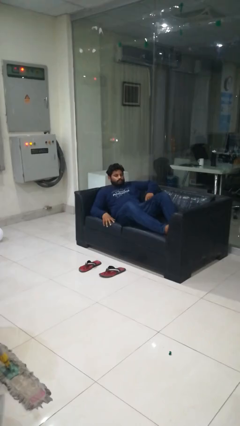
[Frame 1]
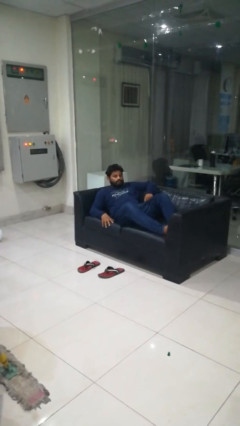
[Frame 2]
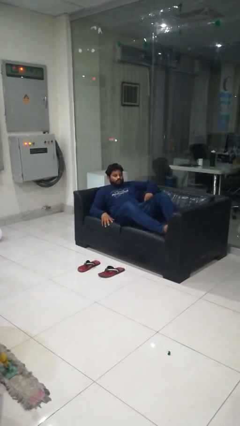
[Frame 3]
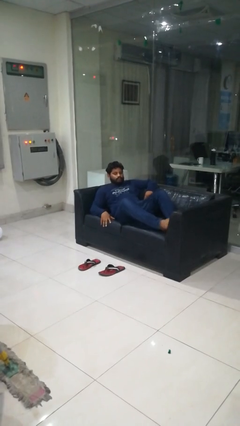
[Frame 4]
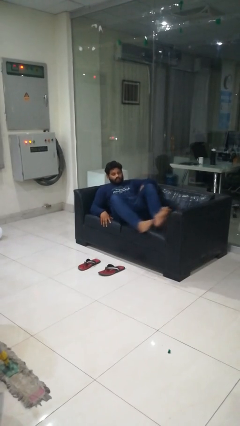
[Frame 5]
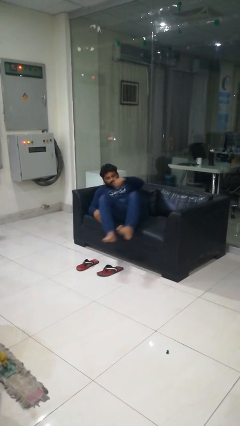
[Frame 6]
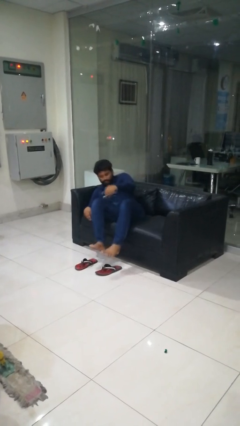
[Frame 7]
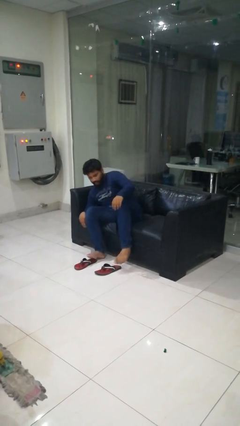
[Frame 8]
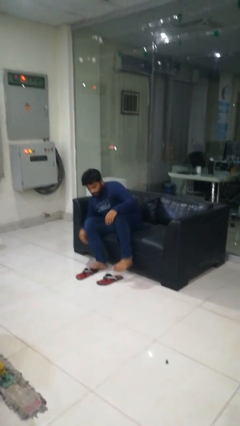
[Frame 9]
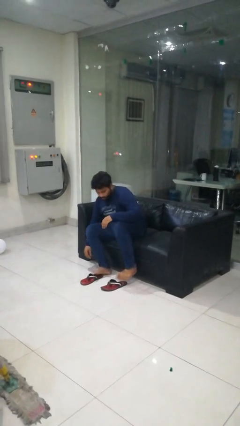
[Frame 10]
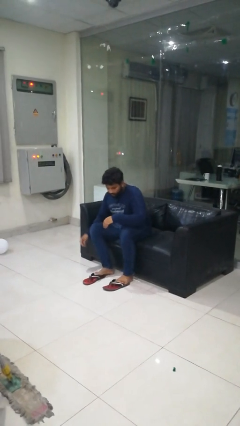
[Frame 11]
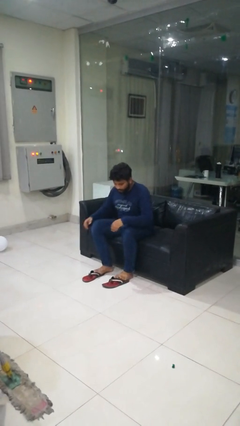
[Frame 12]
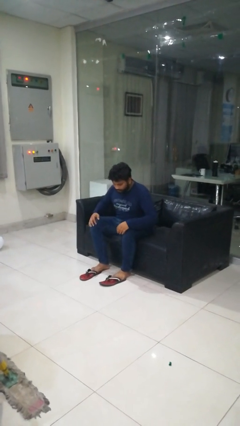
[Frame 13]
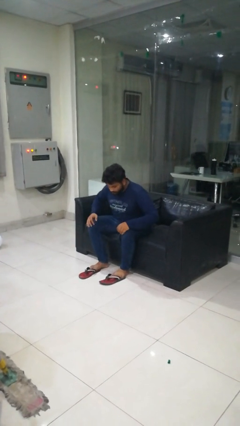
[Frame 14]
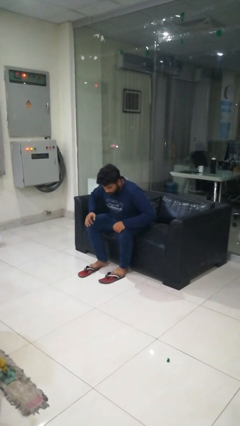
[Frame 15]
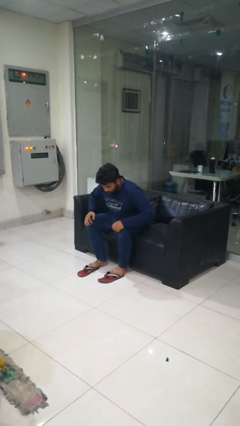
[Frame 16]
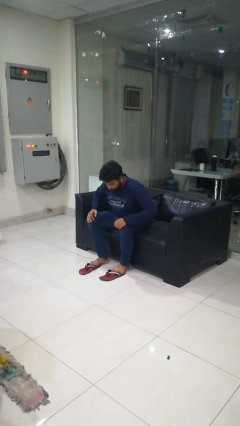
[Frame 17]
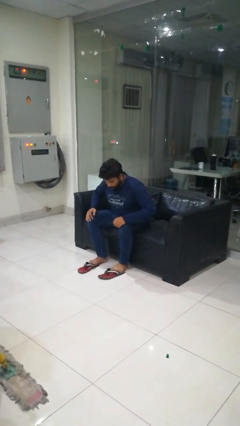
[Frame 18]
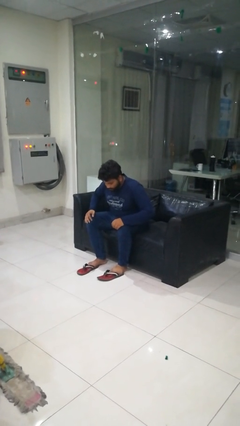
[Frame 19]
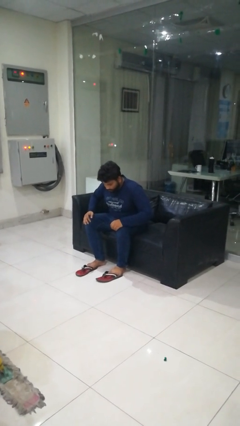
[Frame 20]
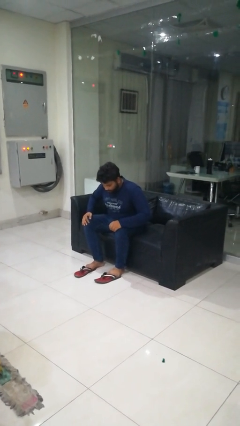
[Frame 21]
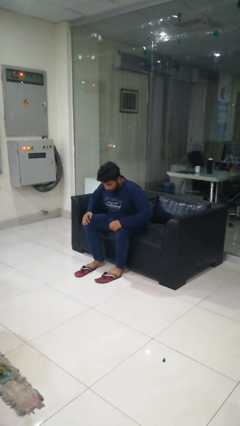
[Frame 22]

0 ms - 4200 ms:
person stands up

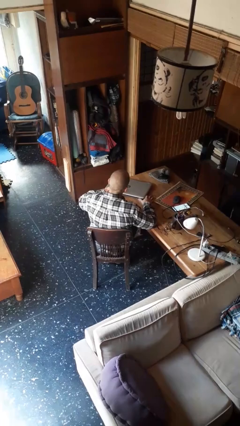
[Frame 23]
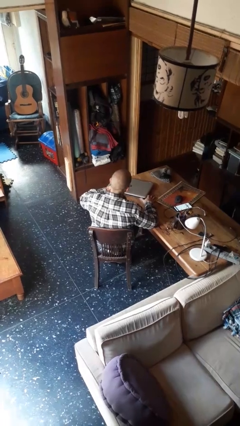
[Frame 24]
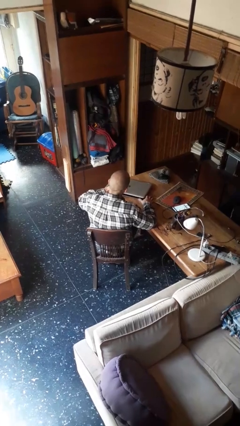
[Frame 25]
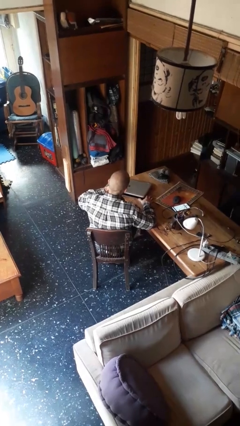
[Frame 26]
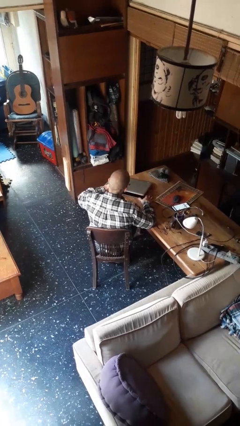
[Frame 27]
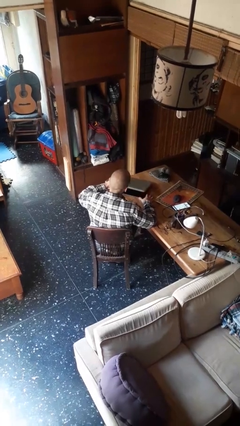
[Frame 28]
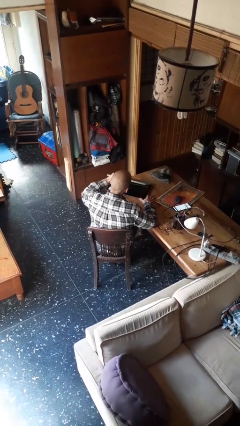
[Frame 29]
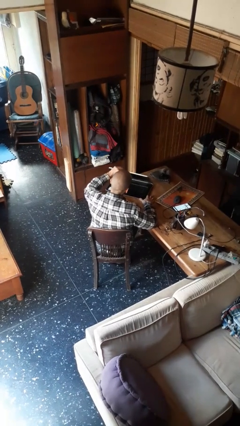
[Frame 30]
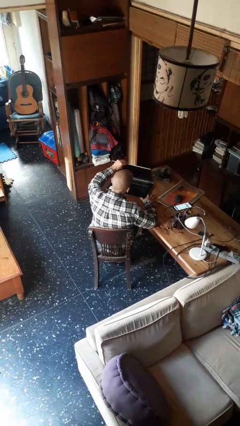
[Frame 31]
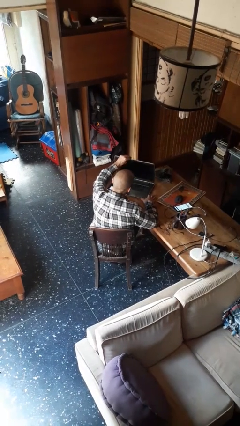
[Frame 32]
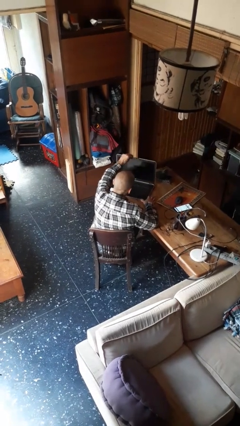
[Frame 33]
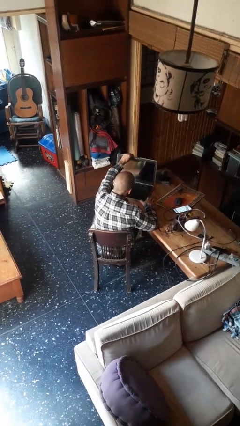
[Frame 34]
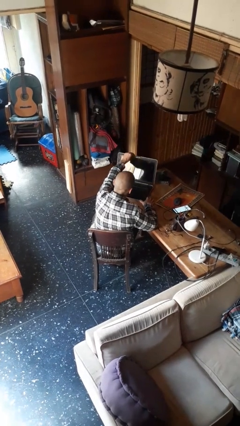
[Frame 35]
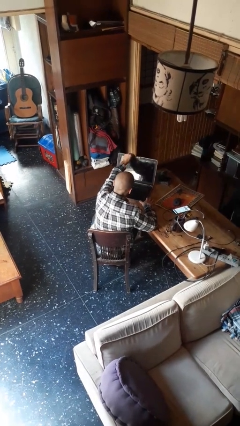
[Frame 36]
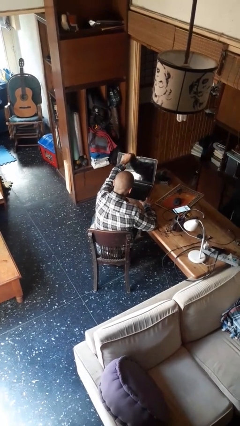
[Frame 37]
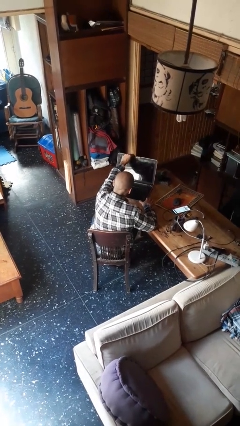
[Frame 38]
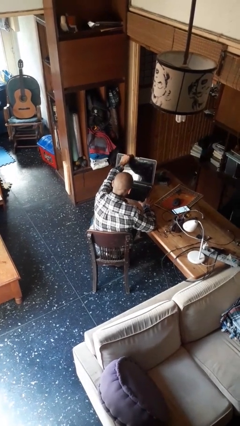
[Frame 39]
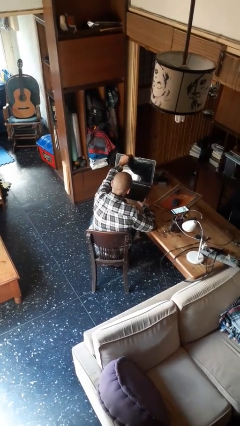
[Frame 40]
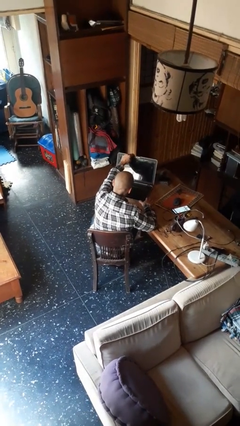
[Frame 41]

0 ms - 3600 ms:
person opens laptop

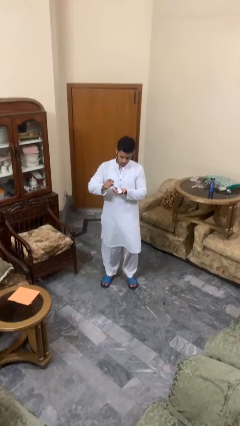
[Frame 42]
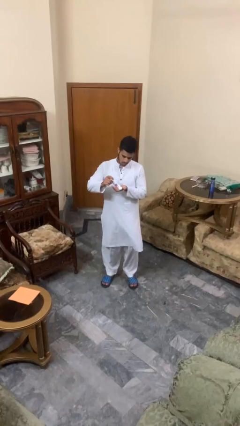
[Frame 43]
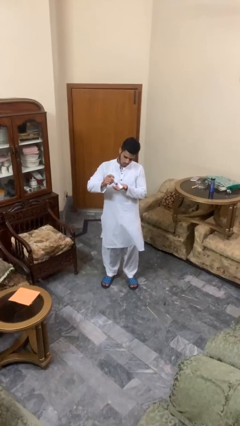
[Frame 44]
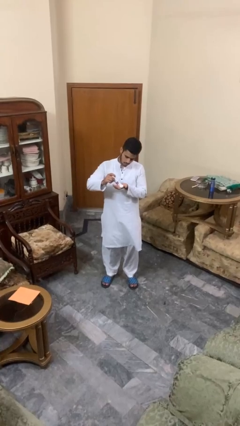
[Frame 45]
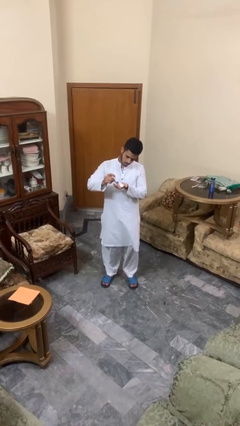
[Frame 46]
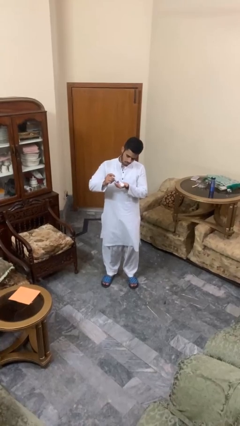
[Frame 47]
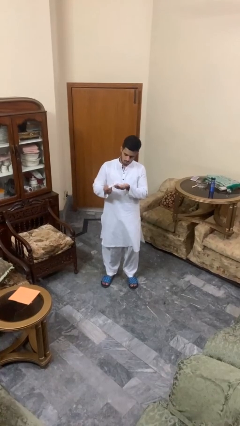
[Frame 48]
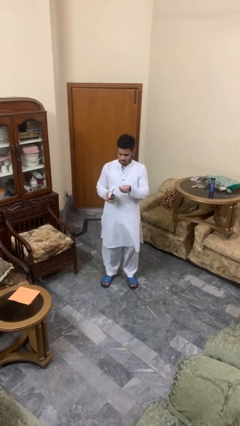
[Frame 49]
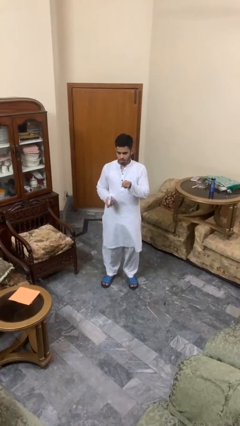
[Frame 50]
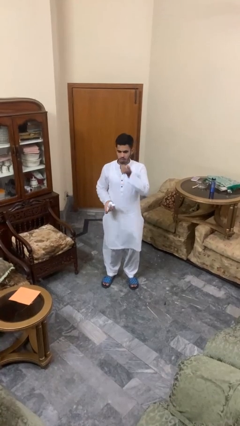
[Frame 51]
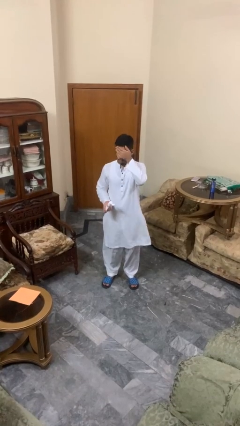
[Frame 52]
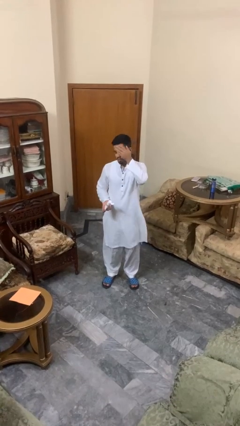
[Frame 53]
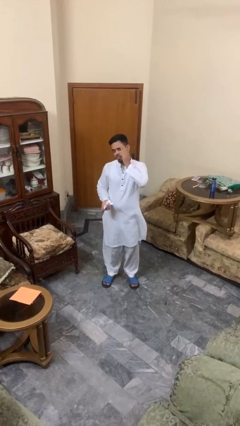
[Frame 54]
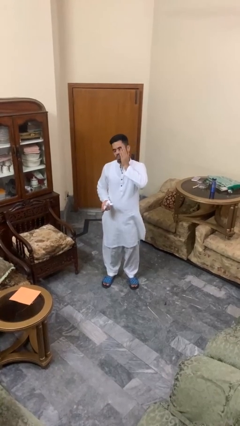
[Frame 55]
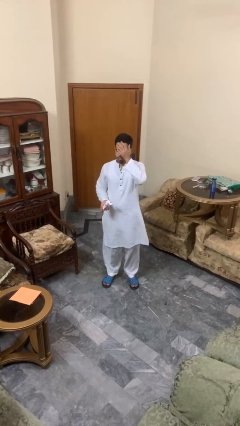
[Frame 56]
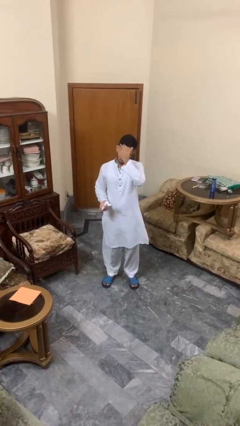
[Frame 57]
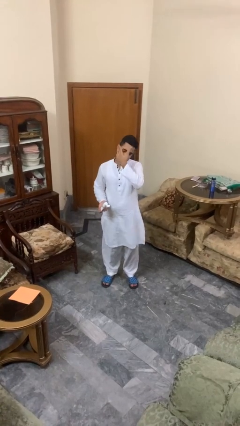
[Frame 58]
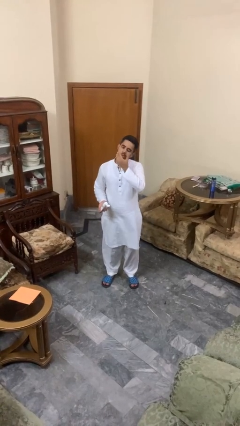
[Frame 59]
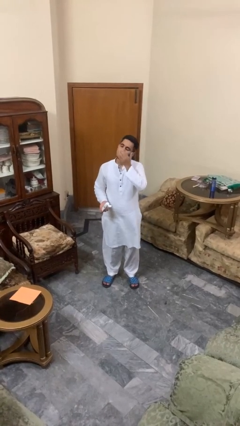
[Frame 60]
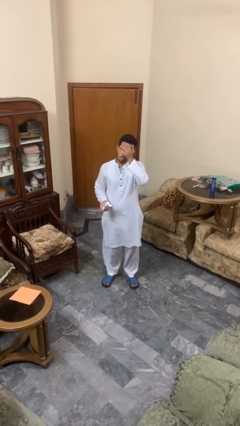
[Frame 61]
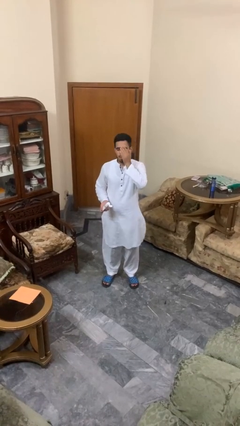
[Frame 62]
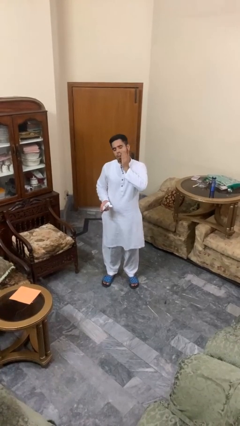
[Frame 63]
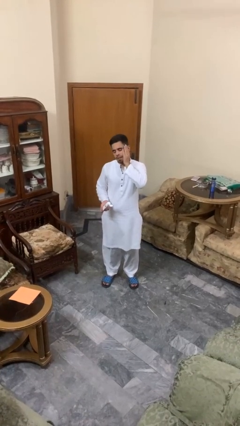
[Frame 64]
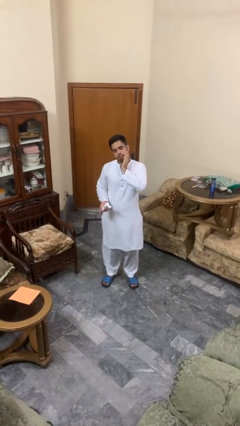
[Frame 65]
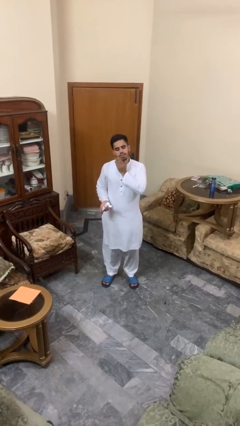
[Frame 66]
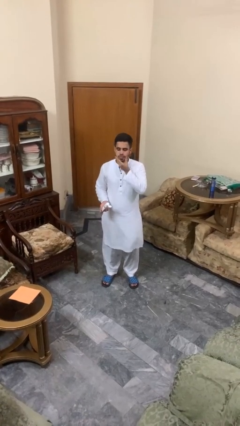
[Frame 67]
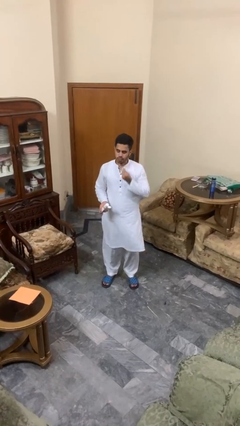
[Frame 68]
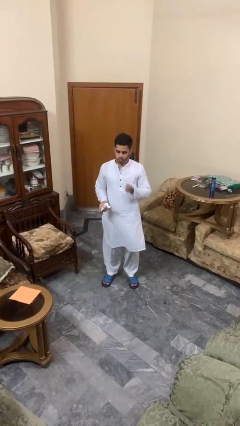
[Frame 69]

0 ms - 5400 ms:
person applies facial moisturizer

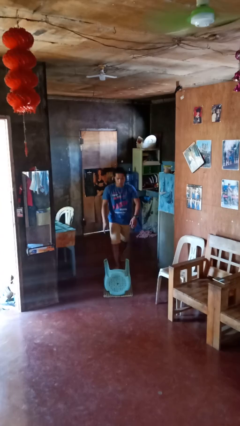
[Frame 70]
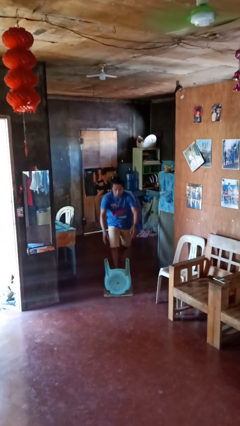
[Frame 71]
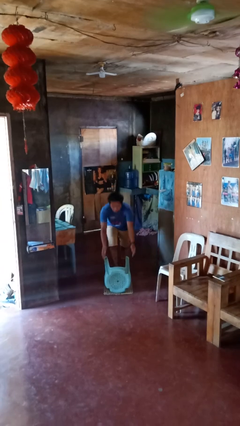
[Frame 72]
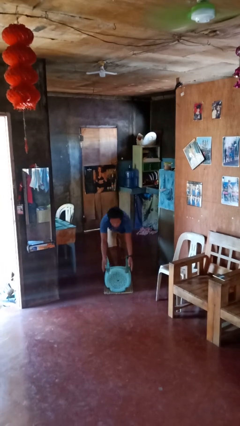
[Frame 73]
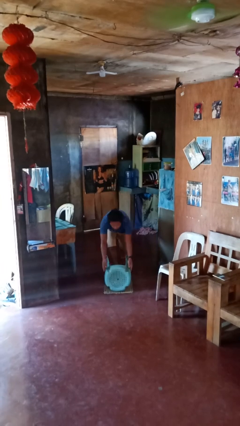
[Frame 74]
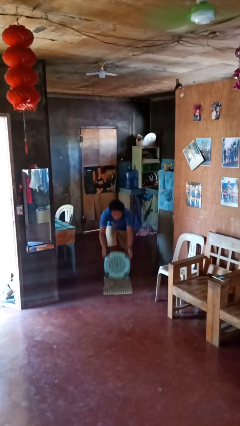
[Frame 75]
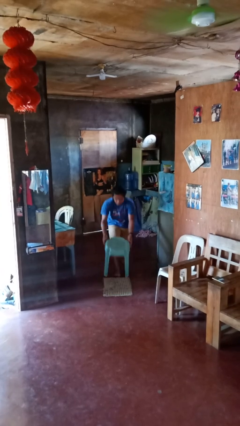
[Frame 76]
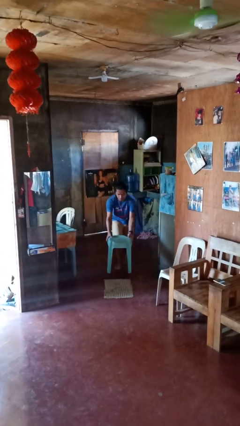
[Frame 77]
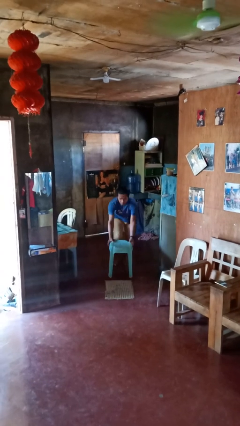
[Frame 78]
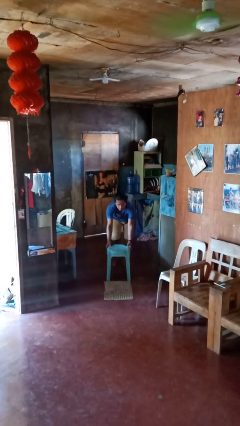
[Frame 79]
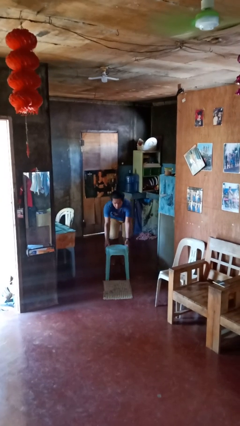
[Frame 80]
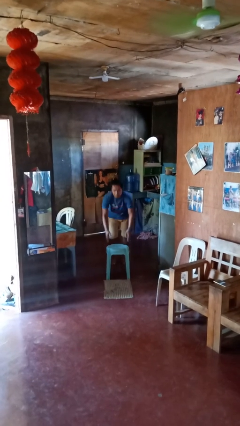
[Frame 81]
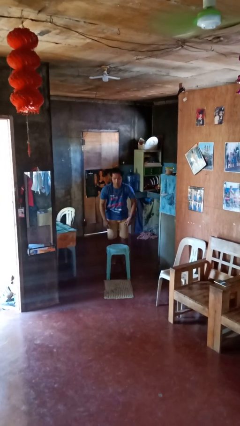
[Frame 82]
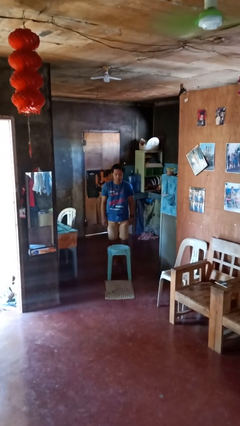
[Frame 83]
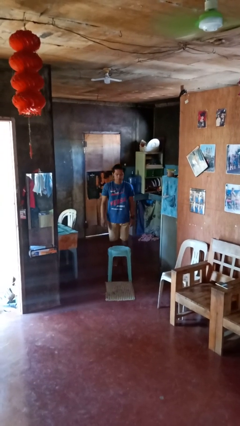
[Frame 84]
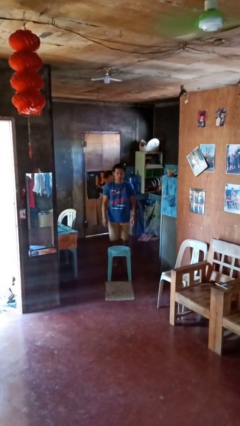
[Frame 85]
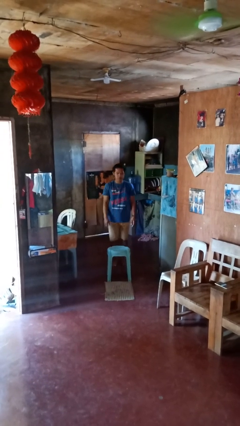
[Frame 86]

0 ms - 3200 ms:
person sets upright furniture

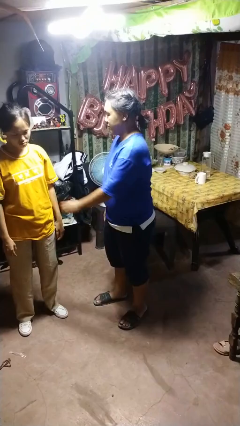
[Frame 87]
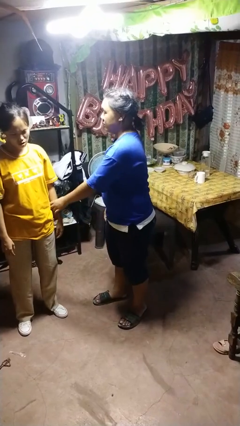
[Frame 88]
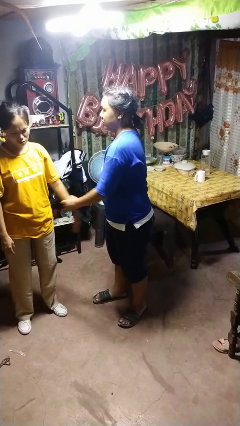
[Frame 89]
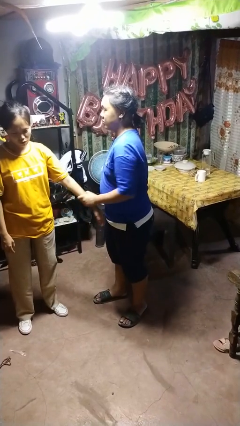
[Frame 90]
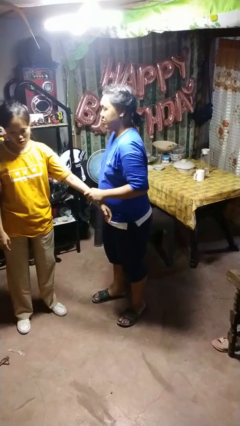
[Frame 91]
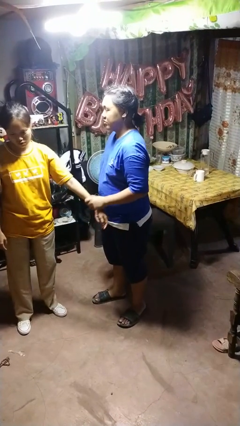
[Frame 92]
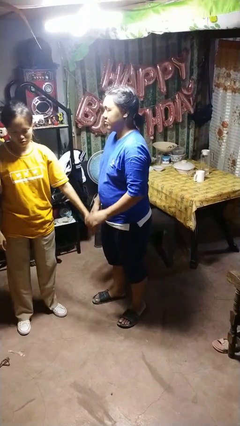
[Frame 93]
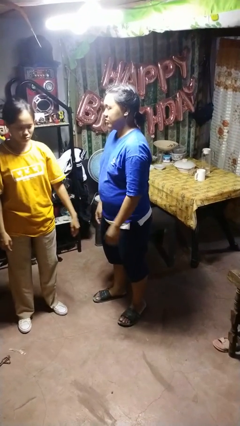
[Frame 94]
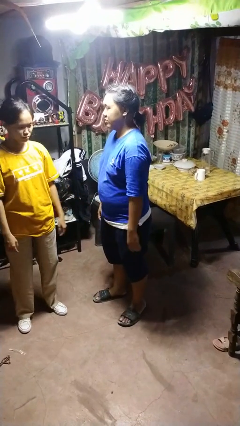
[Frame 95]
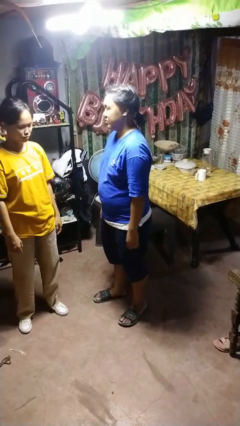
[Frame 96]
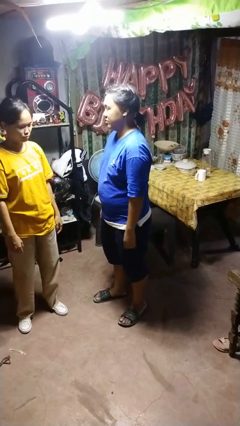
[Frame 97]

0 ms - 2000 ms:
person grabs person by forearm
